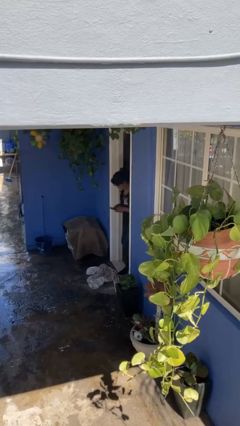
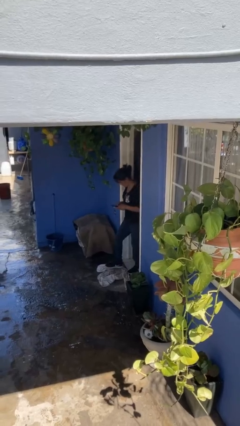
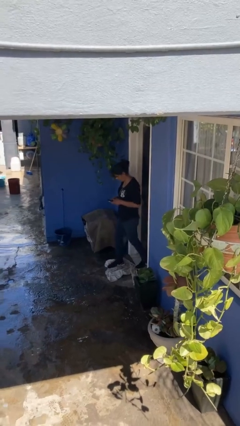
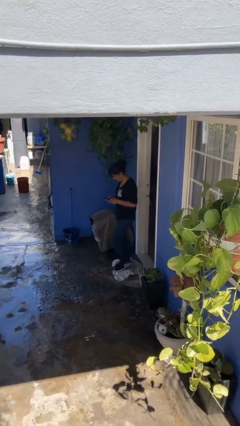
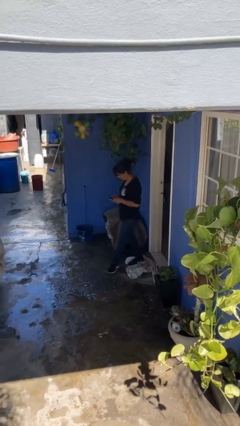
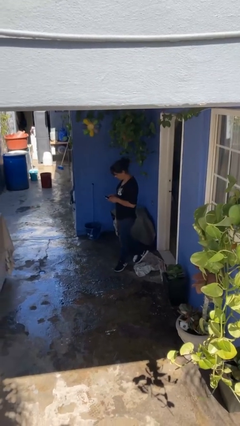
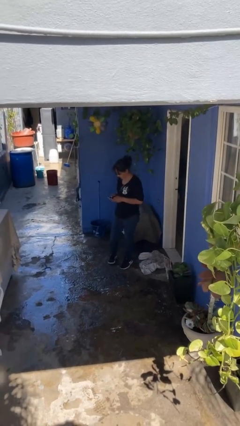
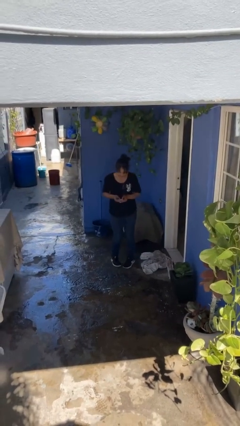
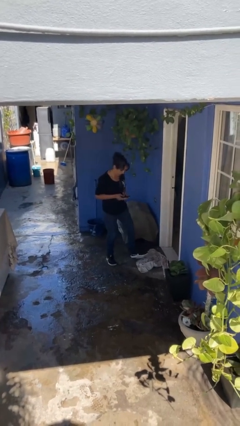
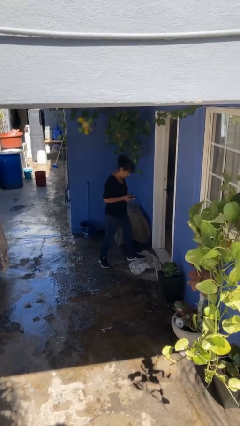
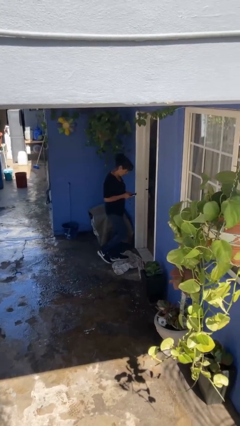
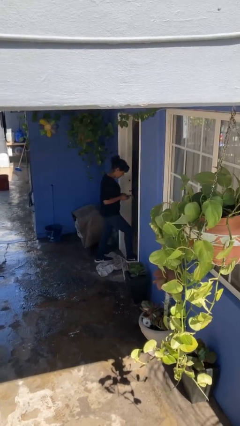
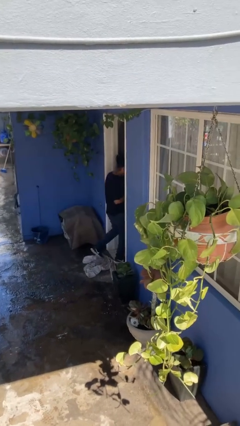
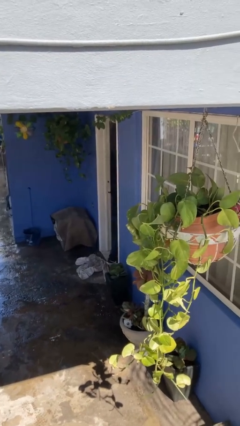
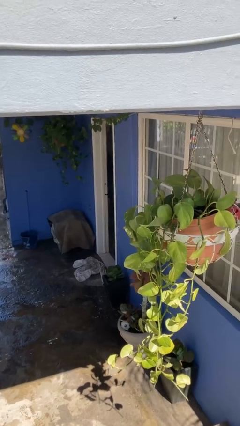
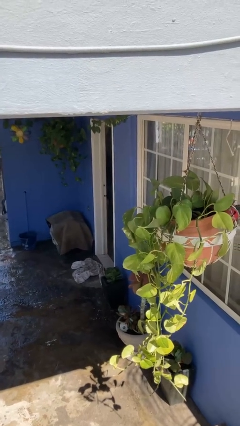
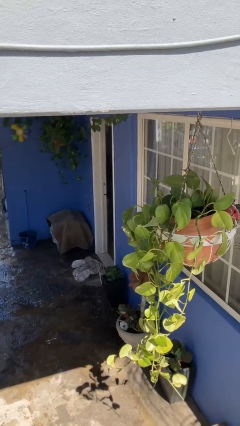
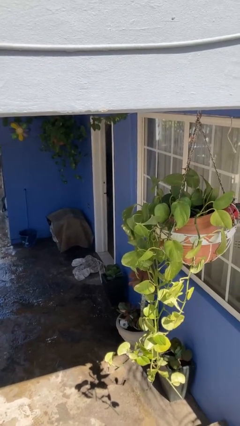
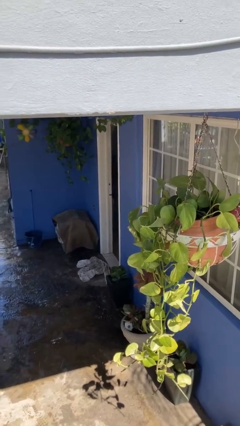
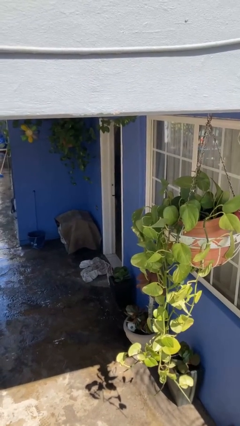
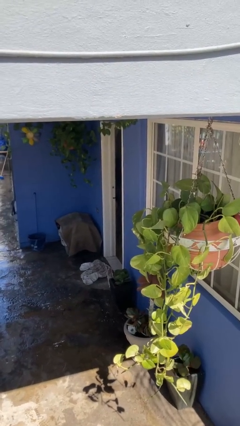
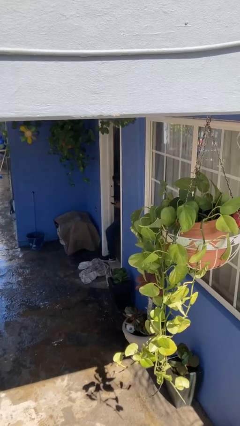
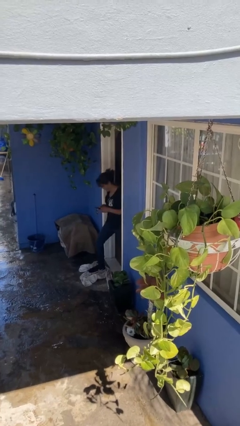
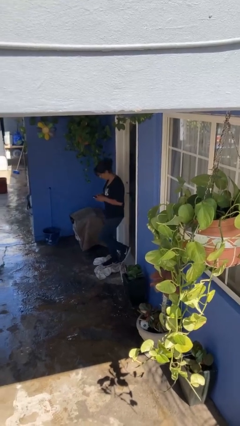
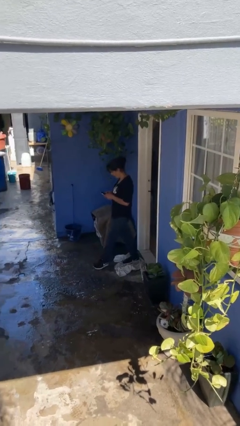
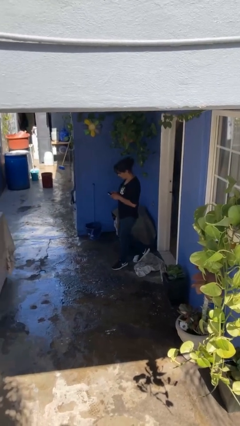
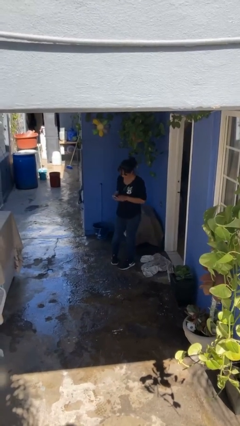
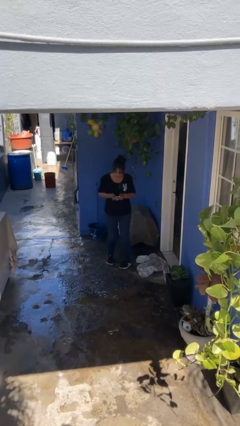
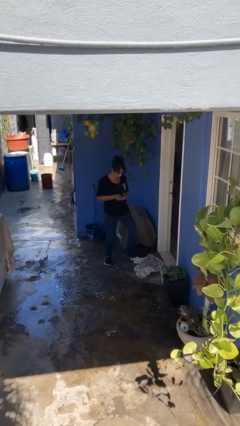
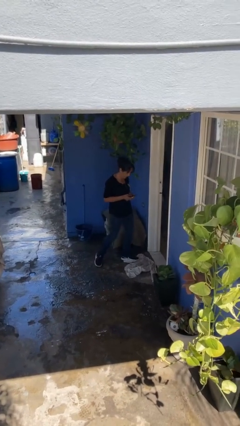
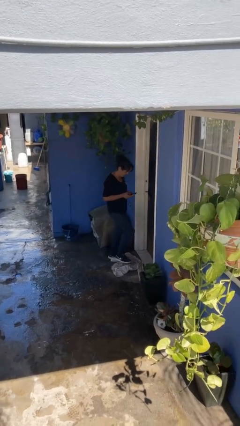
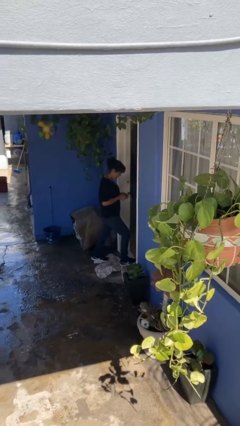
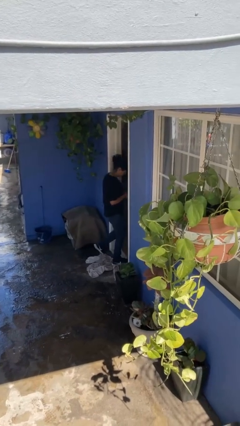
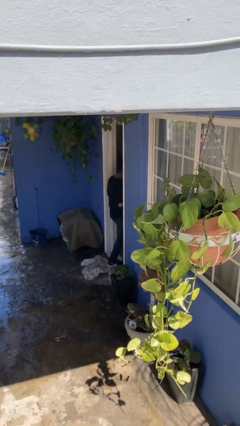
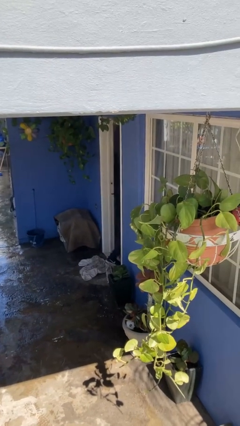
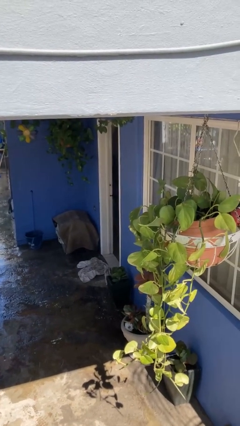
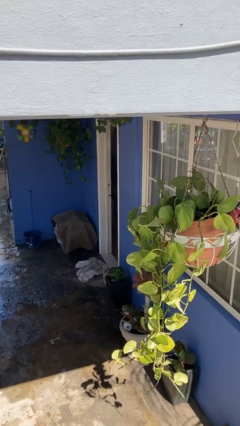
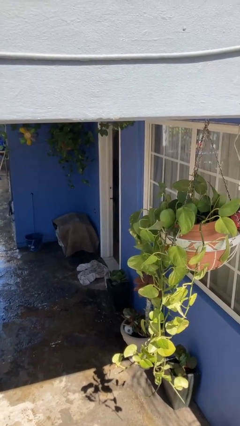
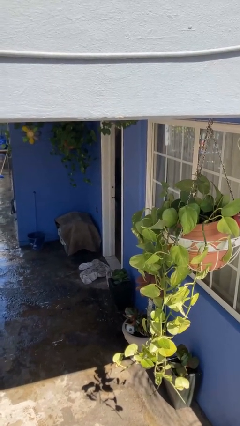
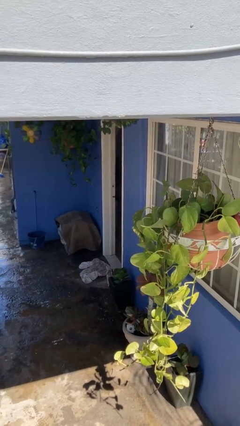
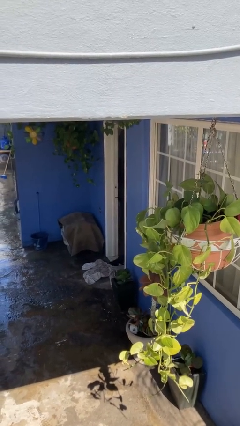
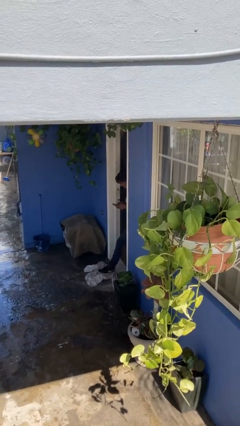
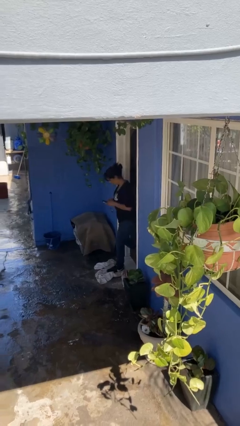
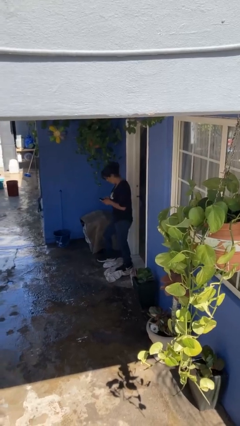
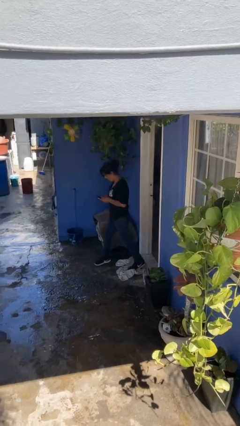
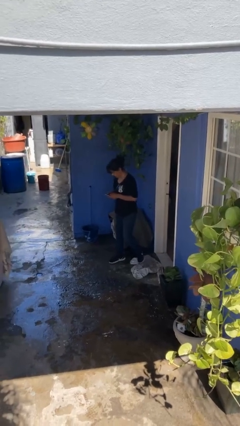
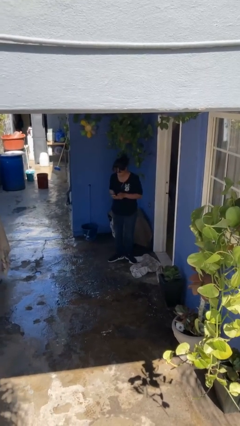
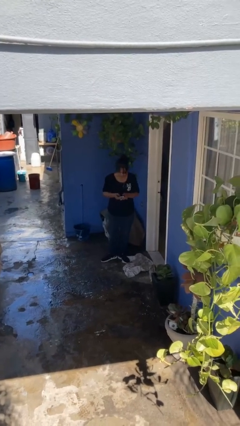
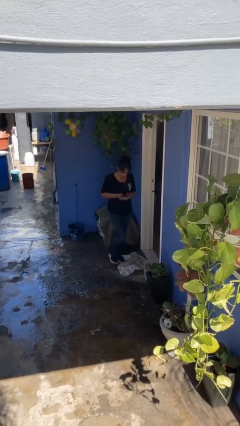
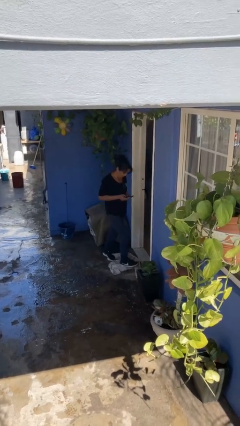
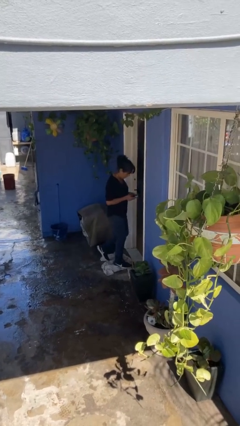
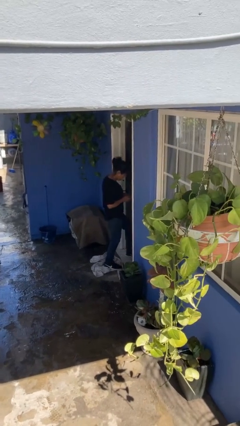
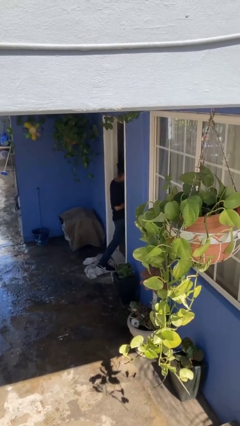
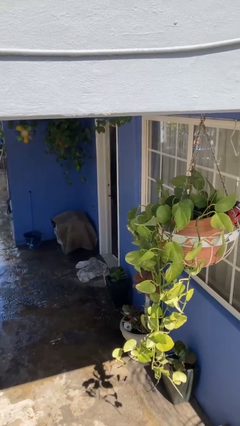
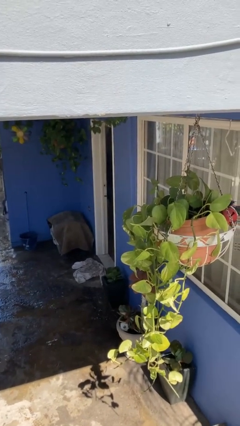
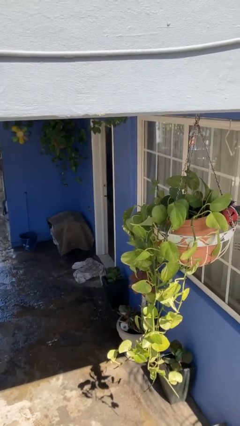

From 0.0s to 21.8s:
person texts on phone

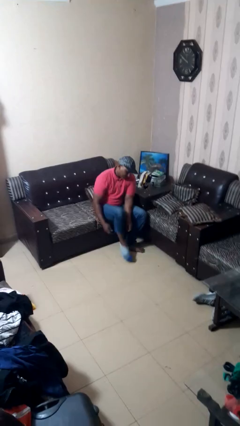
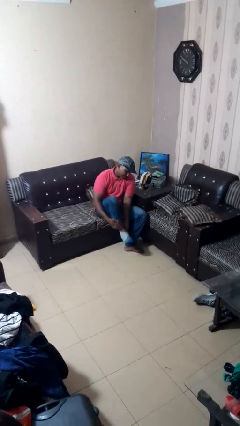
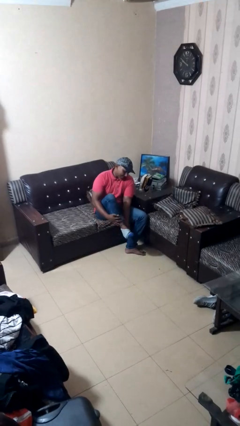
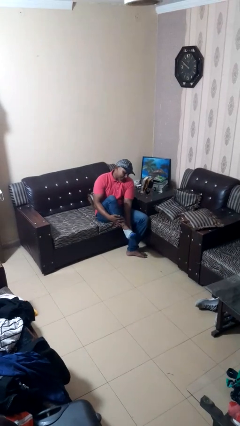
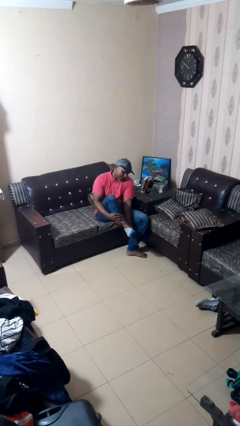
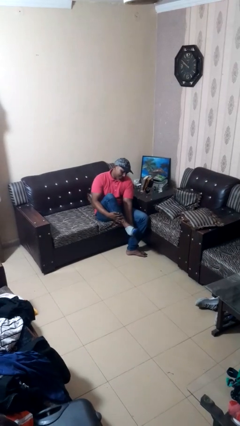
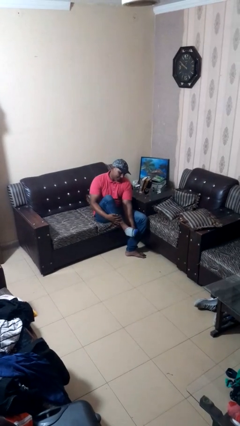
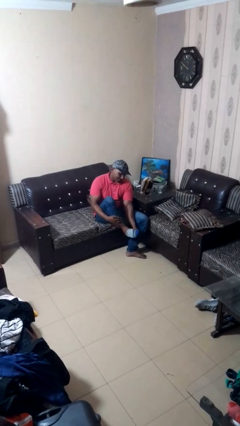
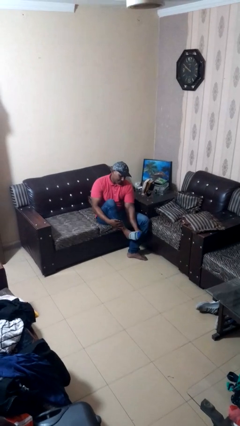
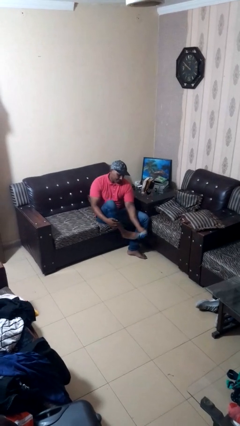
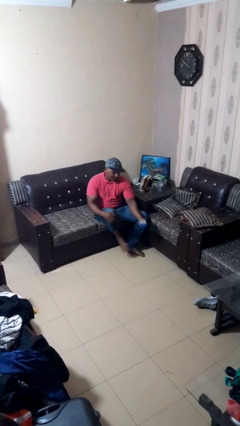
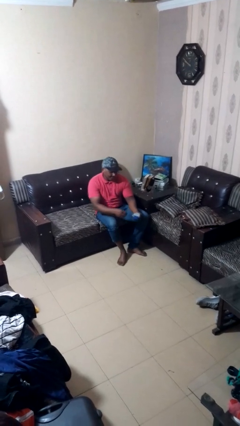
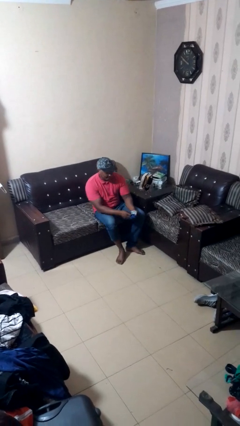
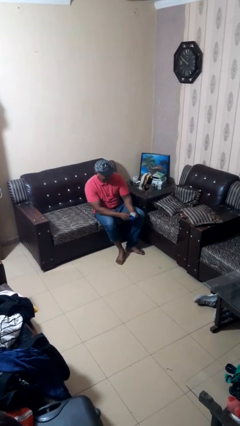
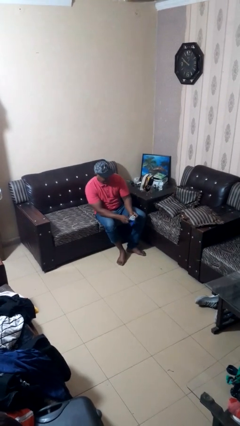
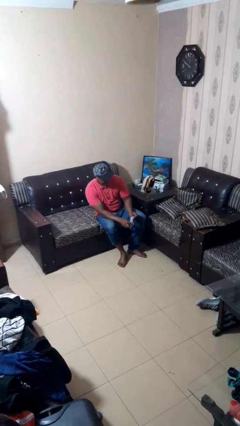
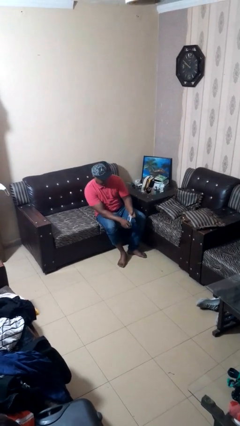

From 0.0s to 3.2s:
person takes off socks

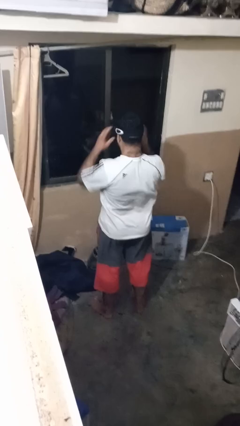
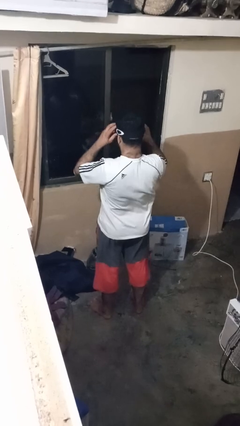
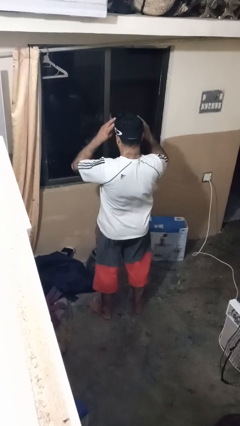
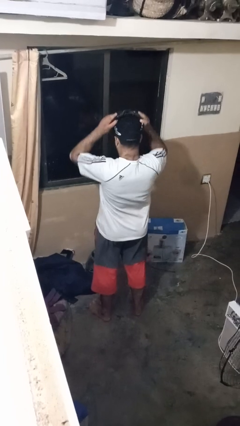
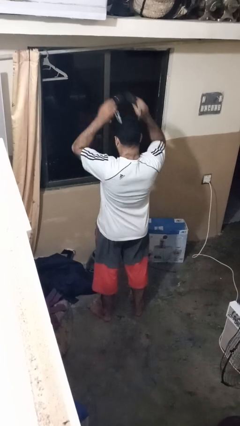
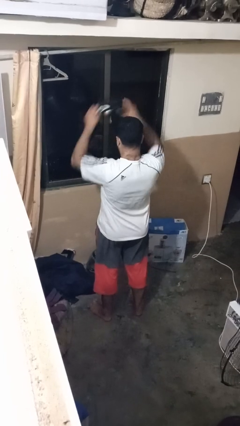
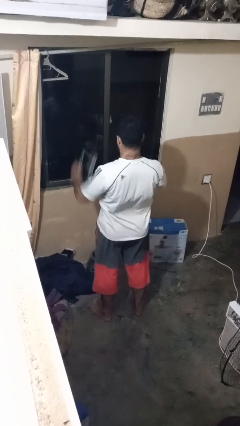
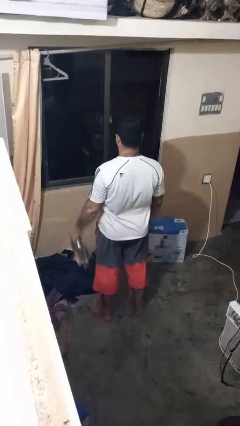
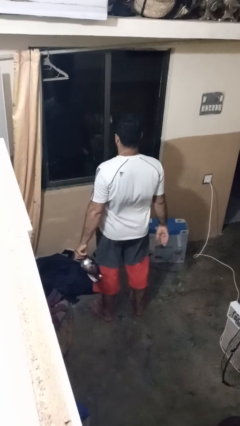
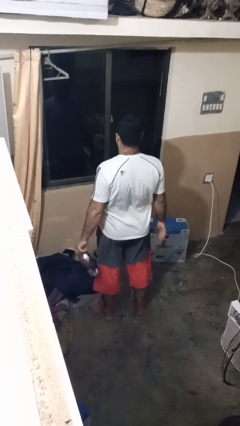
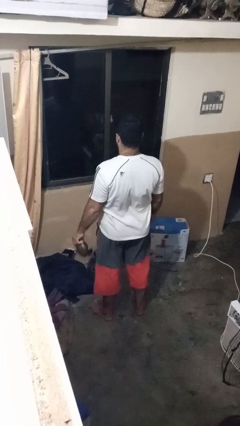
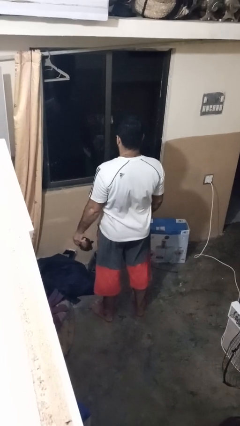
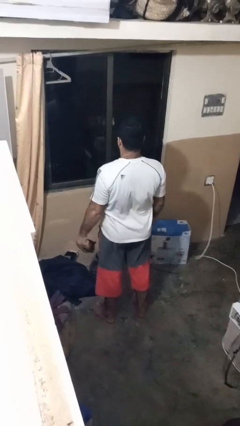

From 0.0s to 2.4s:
person takes off sunglasses

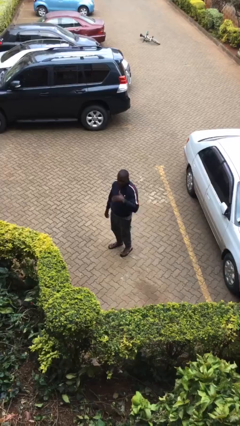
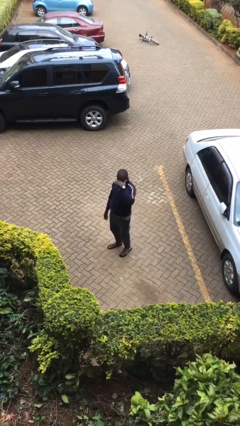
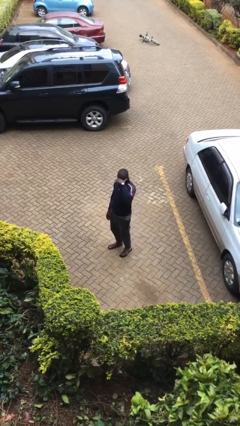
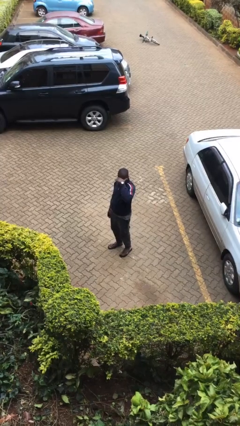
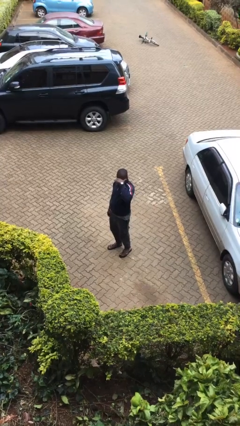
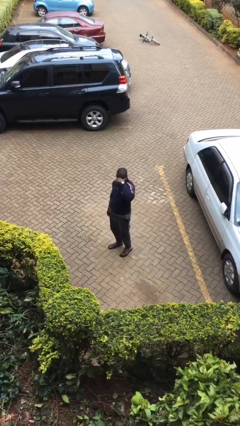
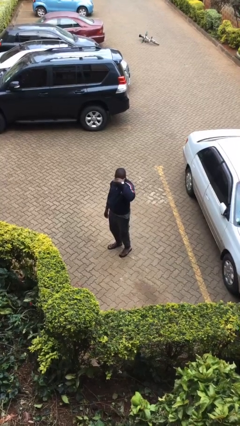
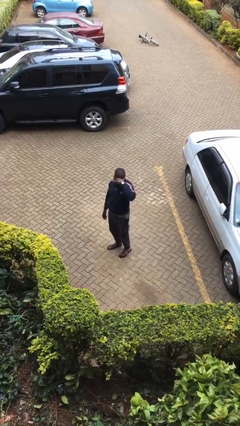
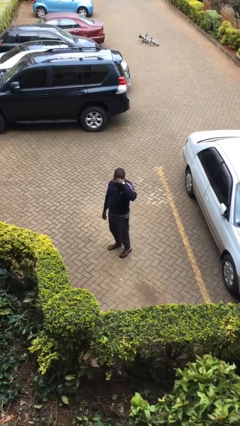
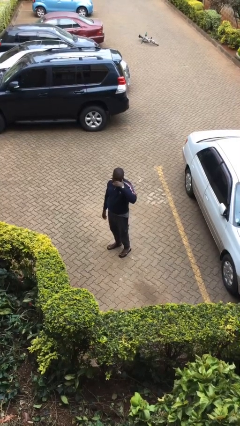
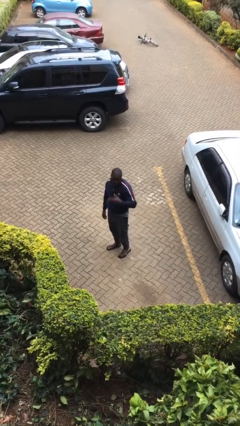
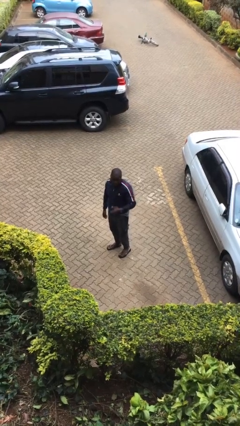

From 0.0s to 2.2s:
person shades eyes
